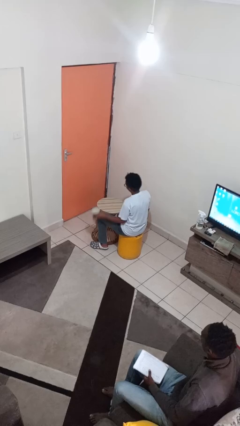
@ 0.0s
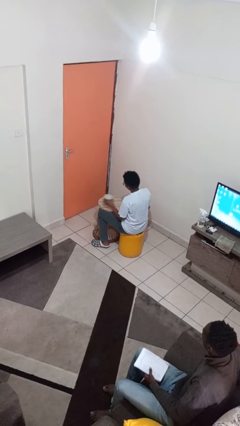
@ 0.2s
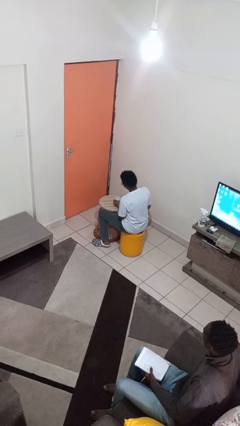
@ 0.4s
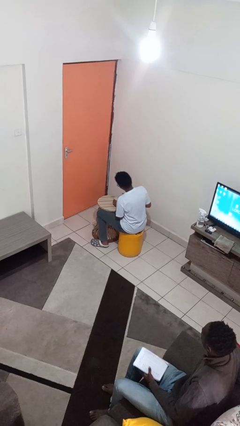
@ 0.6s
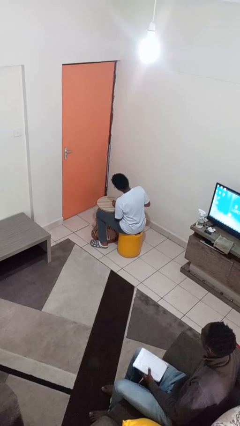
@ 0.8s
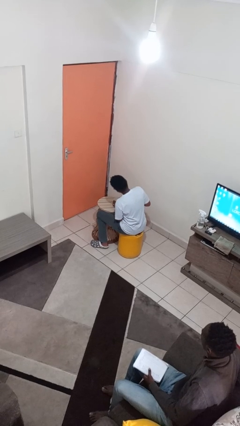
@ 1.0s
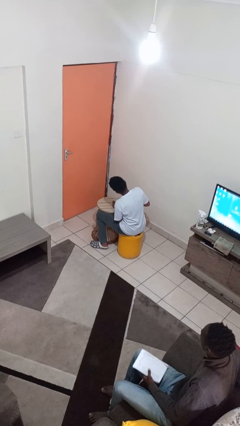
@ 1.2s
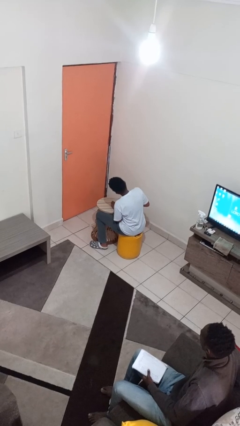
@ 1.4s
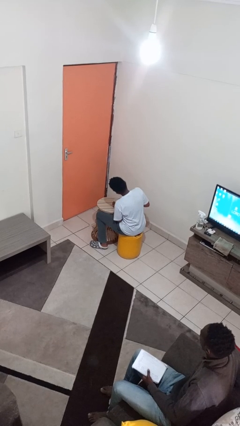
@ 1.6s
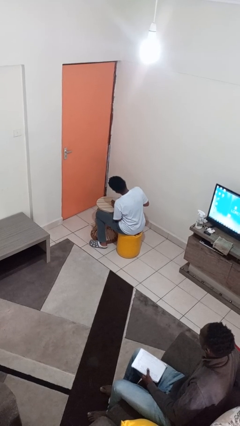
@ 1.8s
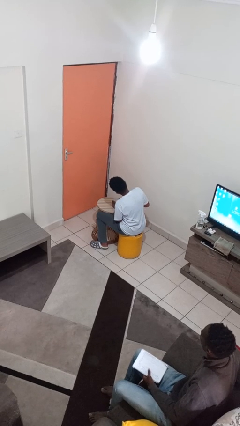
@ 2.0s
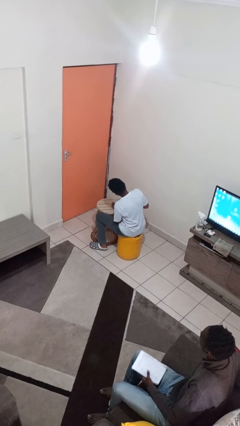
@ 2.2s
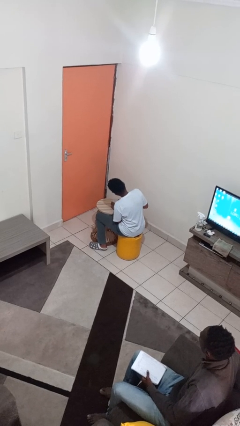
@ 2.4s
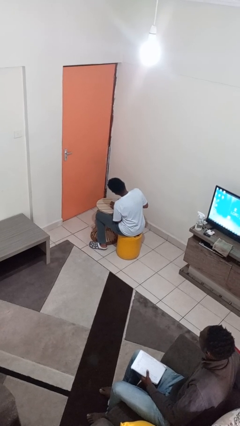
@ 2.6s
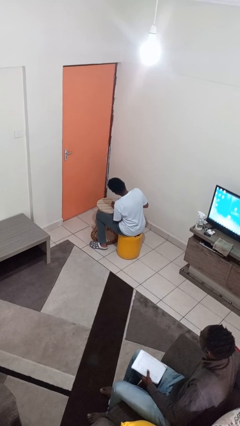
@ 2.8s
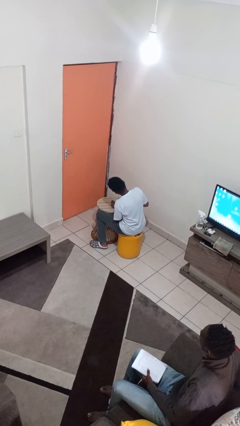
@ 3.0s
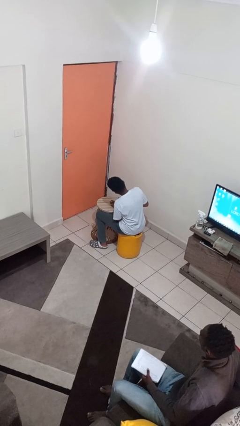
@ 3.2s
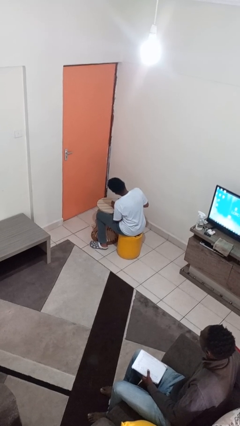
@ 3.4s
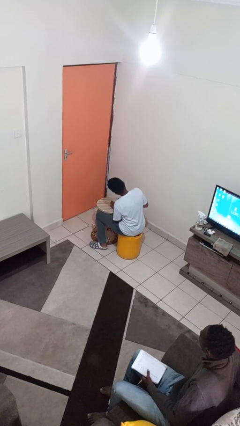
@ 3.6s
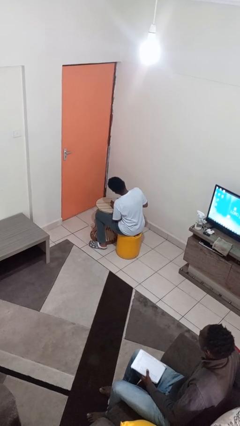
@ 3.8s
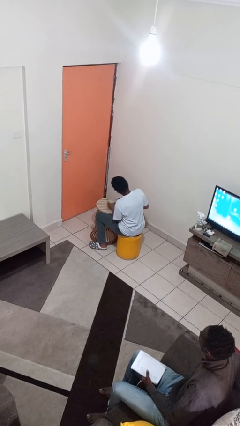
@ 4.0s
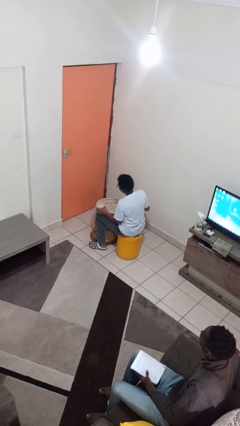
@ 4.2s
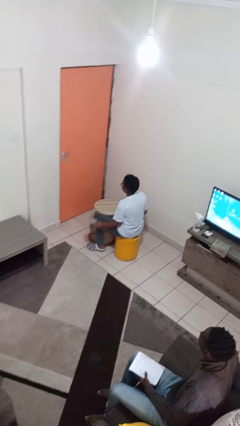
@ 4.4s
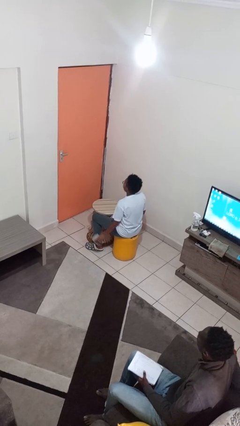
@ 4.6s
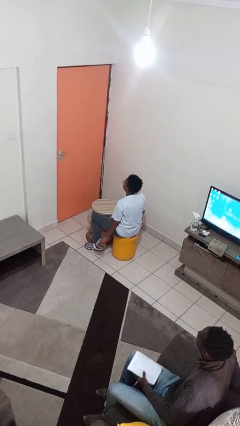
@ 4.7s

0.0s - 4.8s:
person opens can with can opener

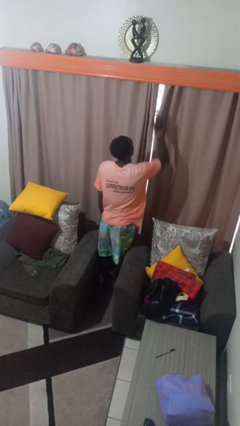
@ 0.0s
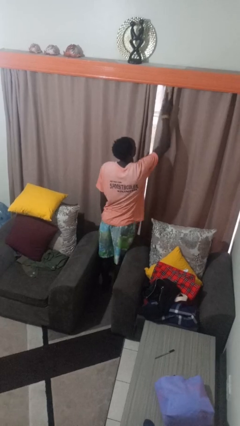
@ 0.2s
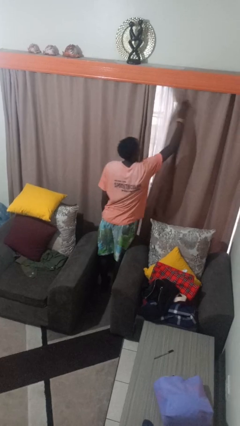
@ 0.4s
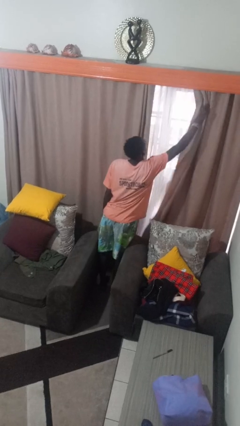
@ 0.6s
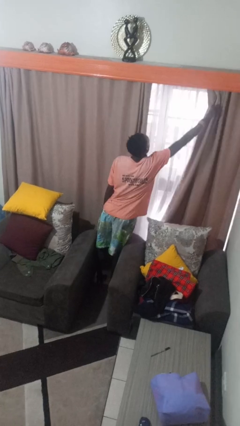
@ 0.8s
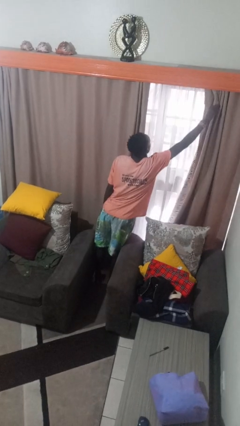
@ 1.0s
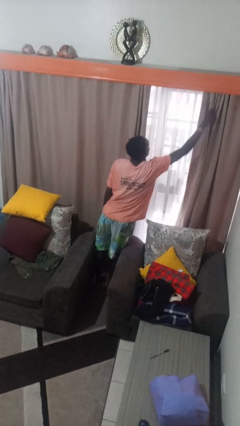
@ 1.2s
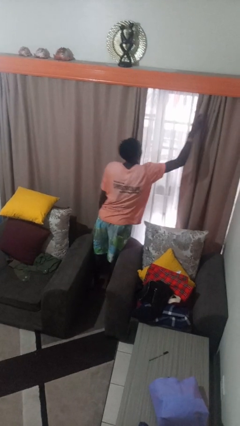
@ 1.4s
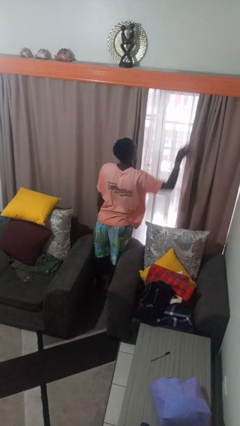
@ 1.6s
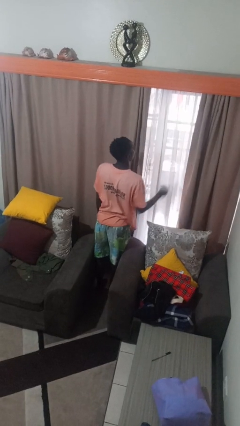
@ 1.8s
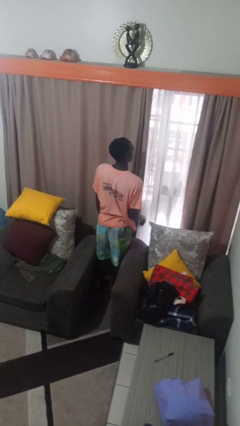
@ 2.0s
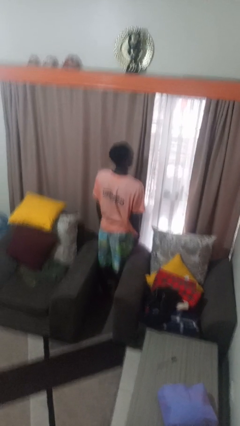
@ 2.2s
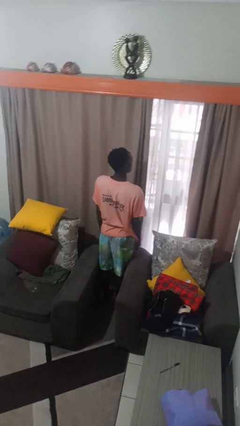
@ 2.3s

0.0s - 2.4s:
person opens curtains

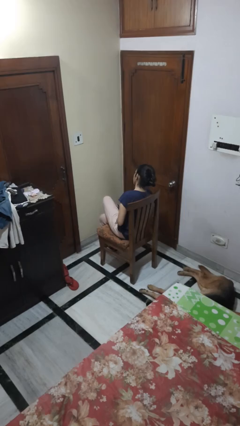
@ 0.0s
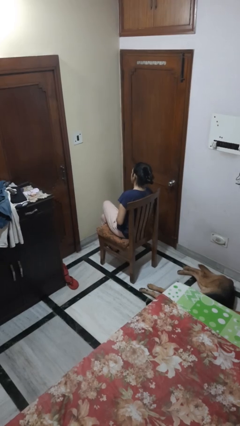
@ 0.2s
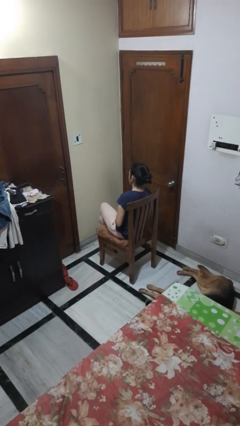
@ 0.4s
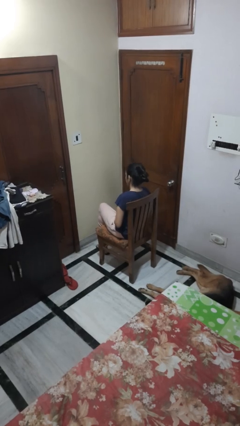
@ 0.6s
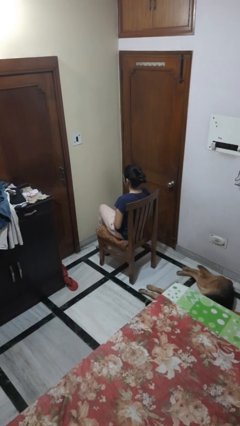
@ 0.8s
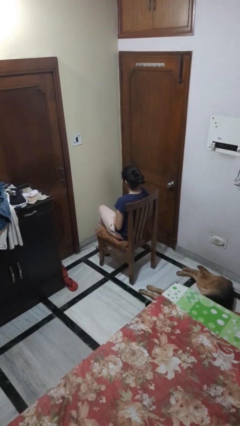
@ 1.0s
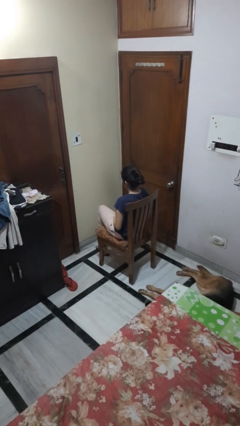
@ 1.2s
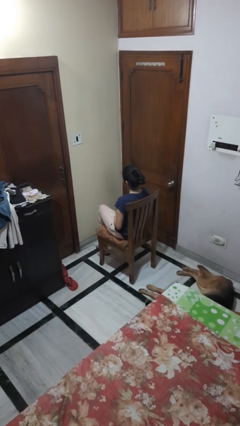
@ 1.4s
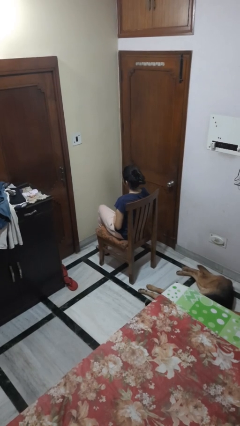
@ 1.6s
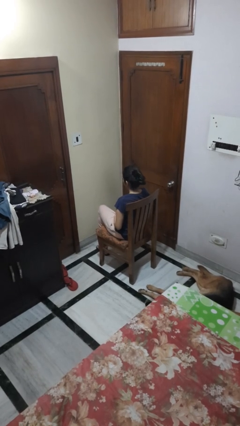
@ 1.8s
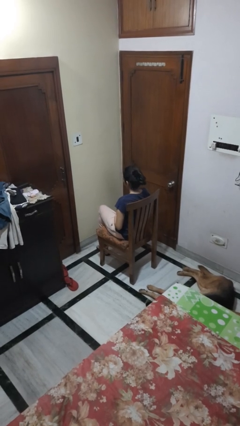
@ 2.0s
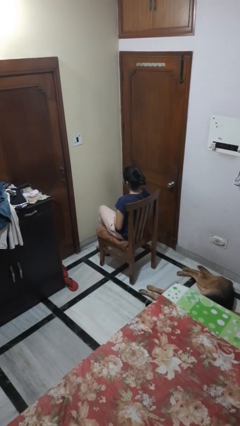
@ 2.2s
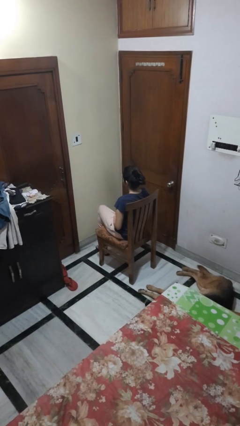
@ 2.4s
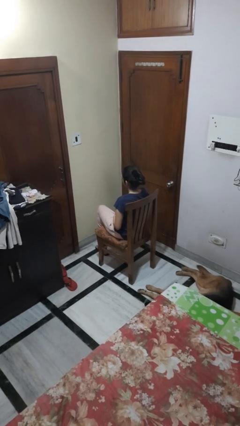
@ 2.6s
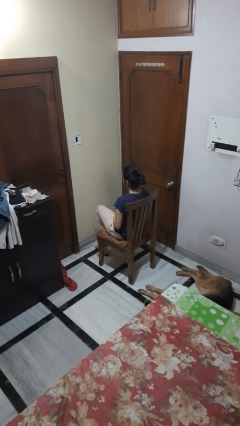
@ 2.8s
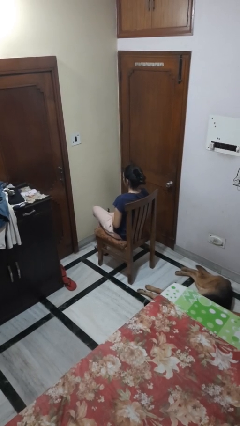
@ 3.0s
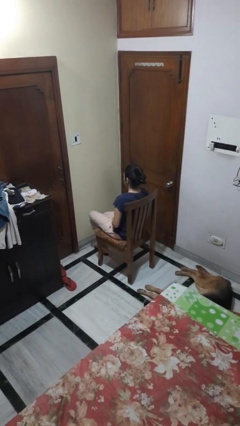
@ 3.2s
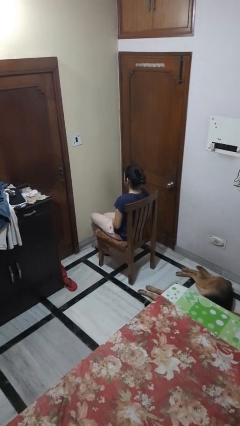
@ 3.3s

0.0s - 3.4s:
person crosses legs

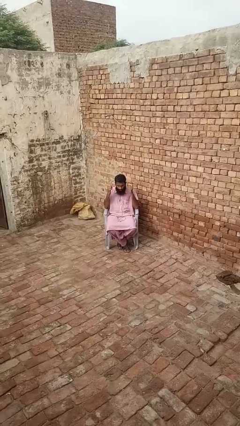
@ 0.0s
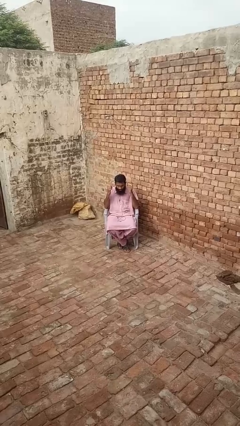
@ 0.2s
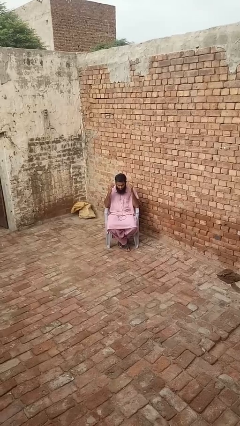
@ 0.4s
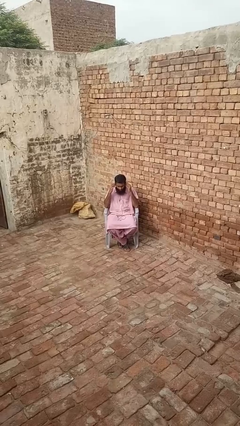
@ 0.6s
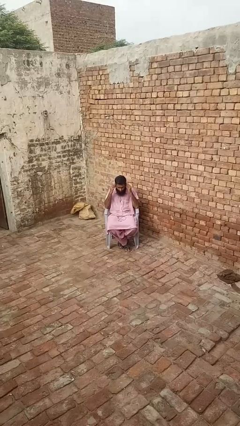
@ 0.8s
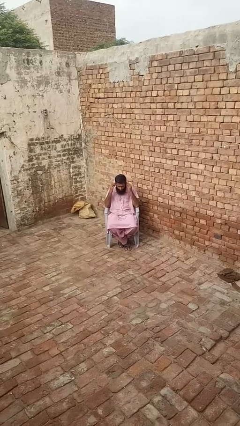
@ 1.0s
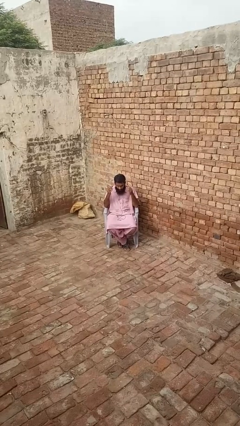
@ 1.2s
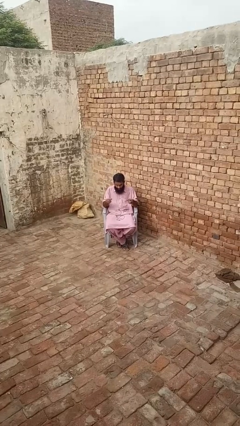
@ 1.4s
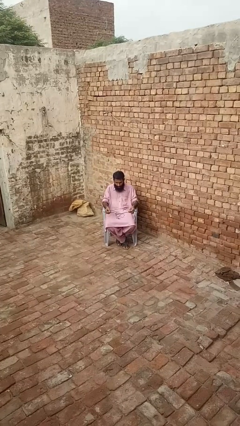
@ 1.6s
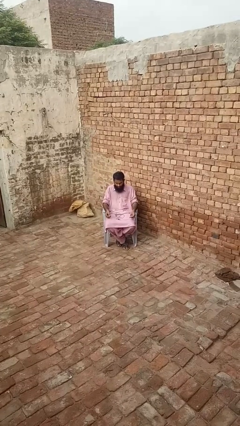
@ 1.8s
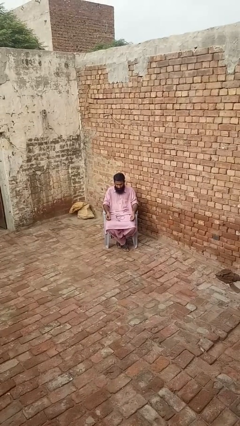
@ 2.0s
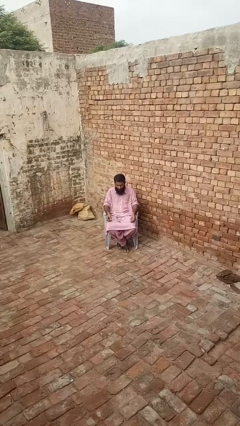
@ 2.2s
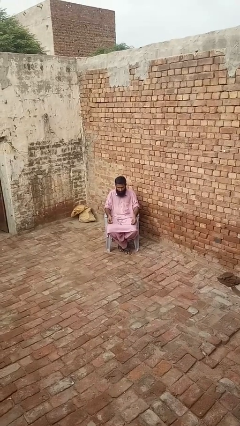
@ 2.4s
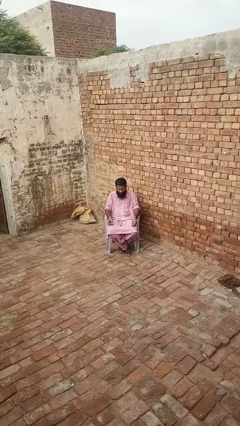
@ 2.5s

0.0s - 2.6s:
person takes off headphones

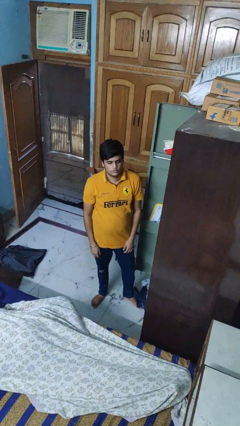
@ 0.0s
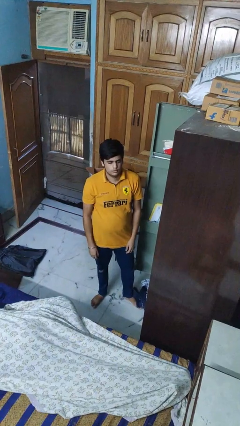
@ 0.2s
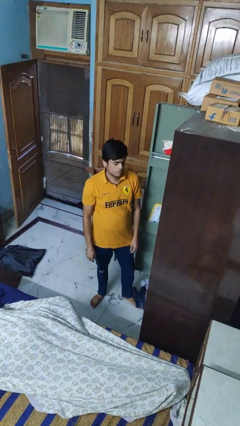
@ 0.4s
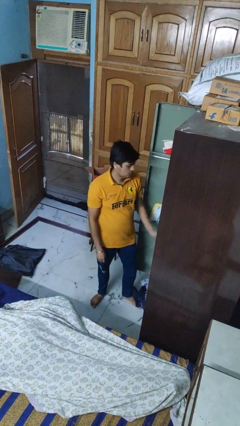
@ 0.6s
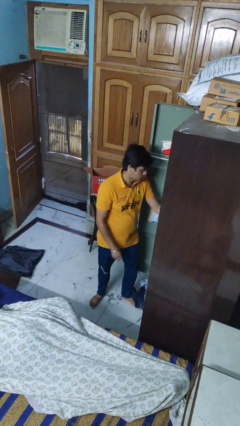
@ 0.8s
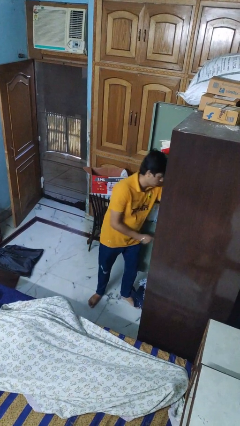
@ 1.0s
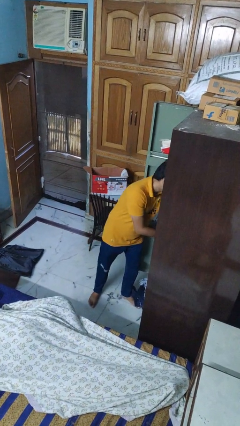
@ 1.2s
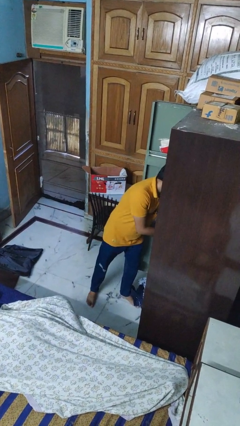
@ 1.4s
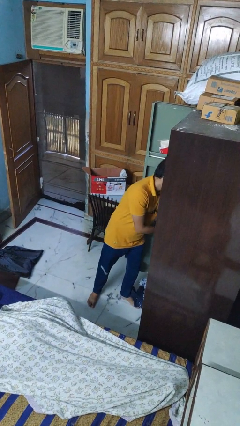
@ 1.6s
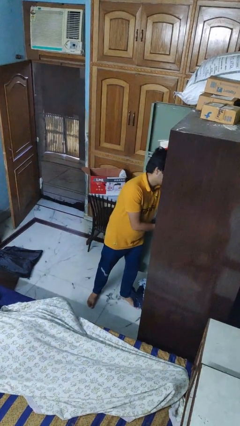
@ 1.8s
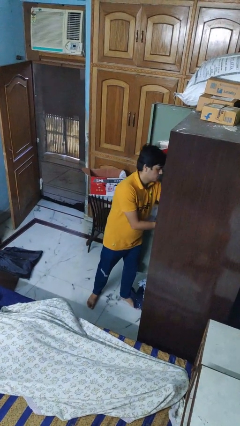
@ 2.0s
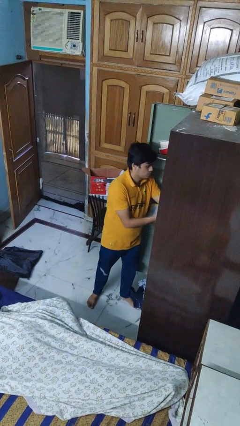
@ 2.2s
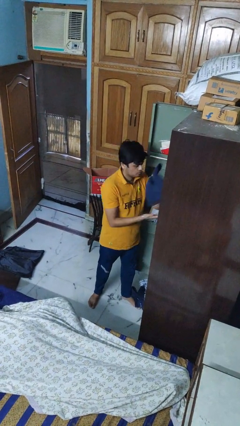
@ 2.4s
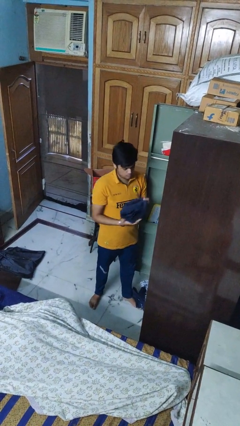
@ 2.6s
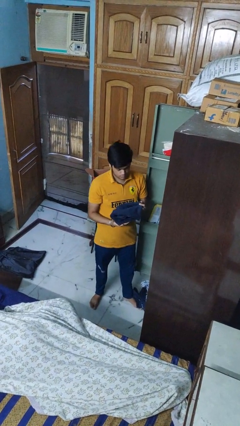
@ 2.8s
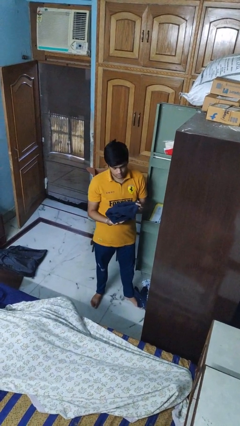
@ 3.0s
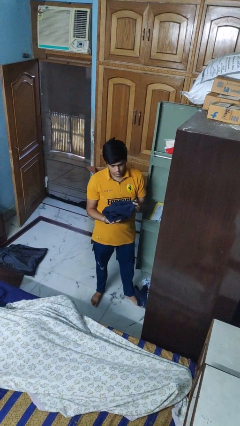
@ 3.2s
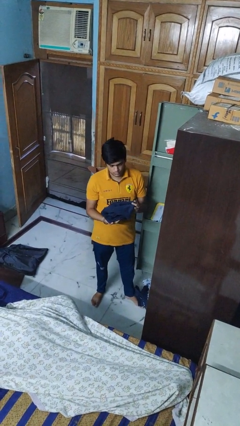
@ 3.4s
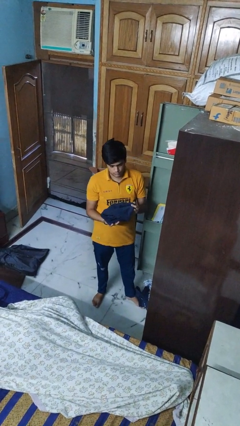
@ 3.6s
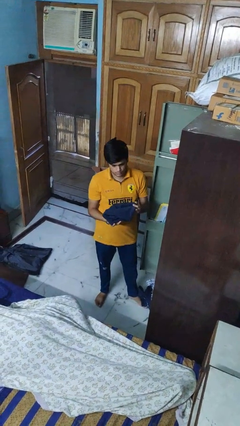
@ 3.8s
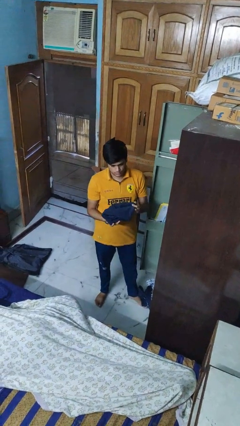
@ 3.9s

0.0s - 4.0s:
person takes clothes from dresser

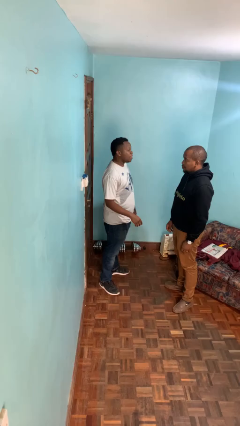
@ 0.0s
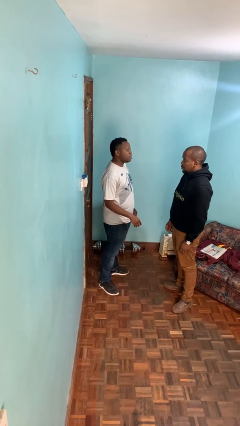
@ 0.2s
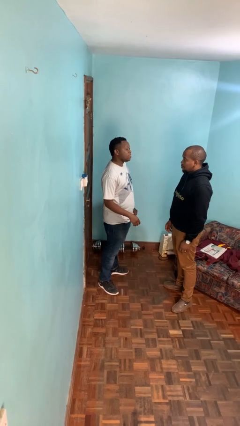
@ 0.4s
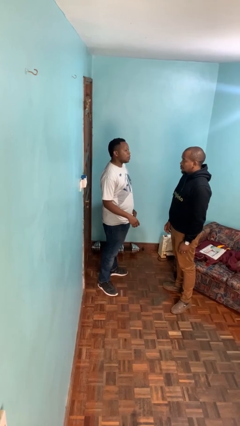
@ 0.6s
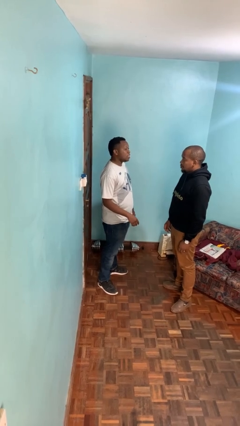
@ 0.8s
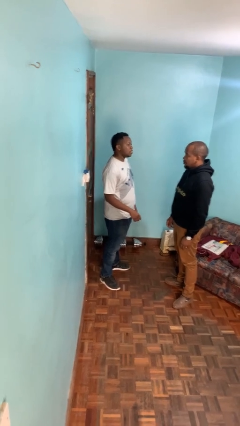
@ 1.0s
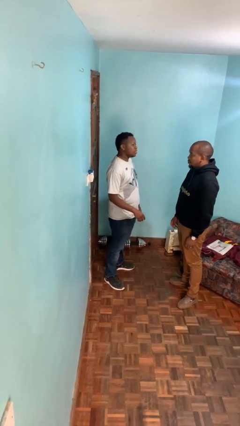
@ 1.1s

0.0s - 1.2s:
person grabs person by forearm
